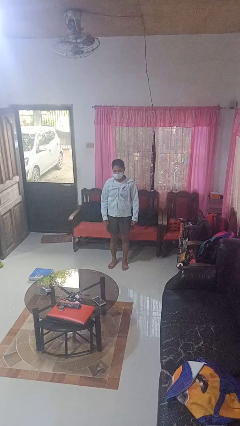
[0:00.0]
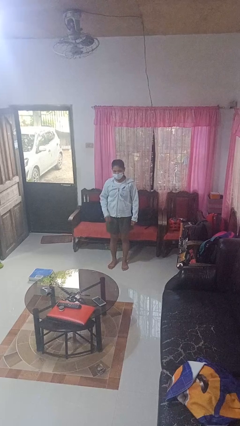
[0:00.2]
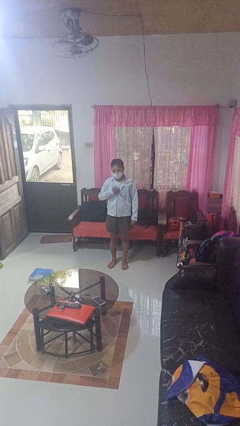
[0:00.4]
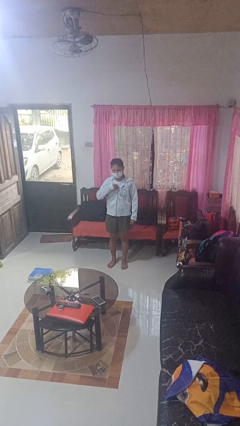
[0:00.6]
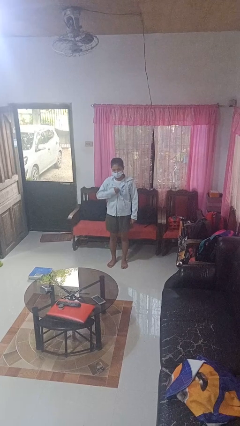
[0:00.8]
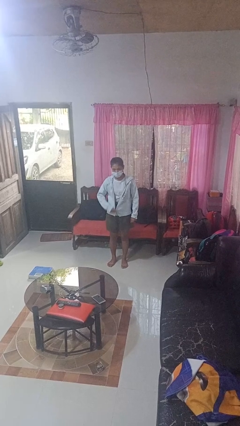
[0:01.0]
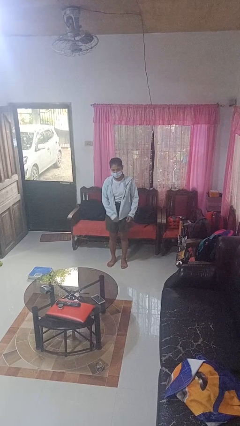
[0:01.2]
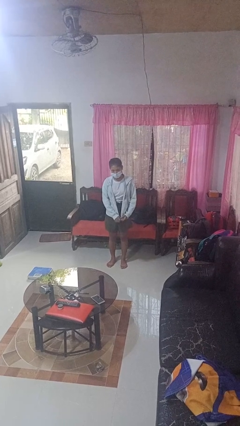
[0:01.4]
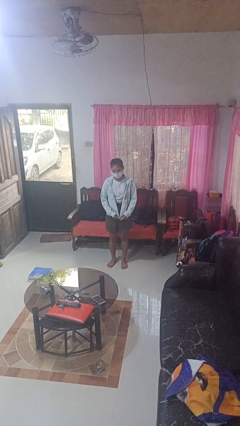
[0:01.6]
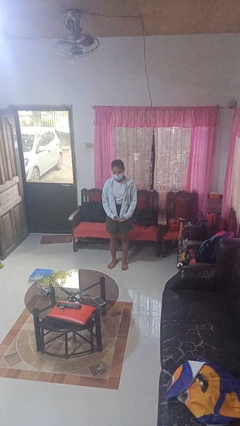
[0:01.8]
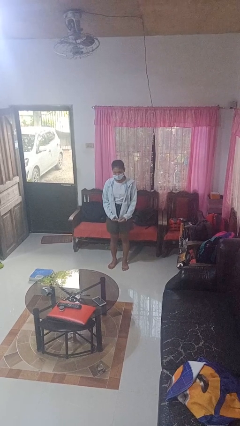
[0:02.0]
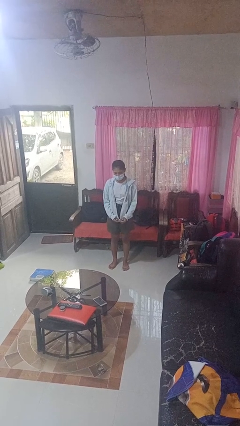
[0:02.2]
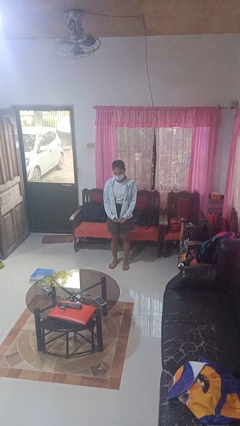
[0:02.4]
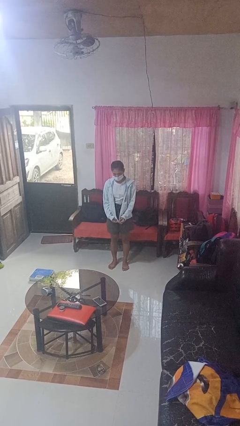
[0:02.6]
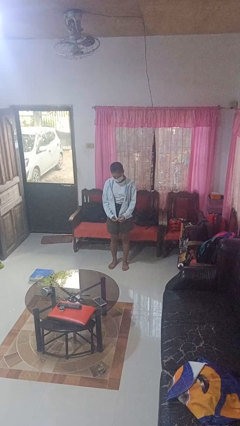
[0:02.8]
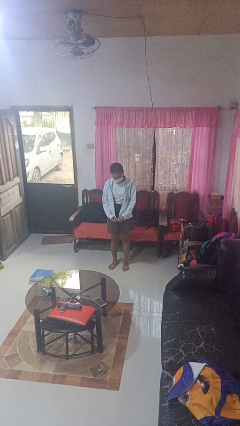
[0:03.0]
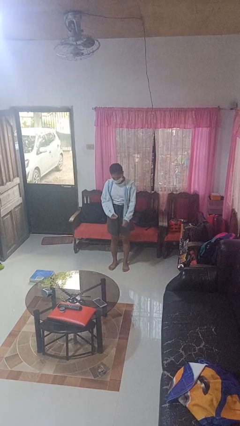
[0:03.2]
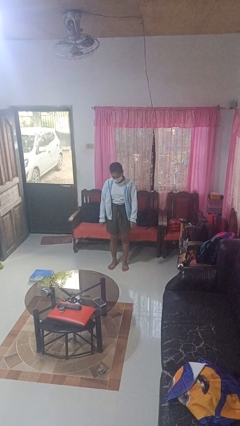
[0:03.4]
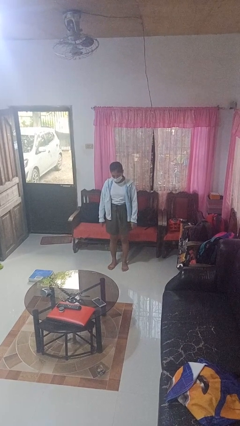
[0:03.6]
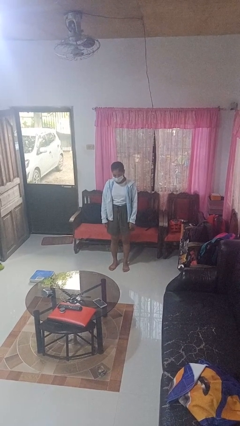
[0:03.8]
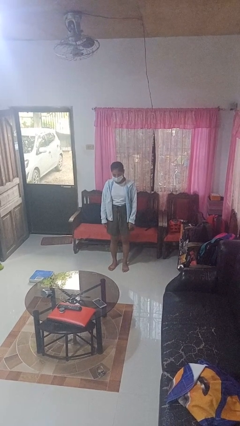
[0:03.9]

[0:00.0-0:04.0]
person unzips jacket

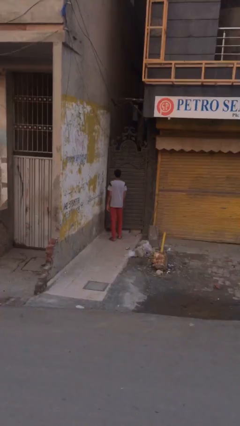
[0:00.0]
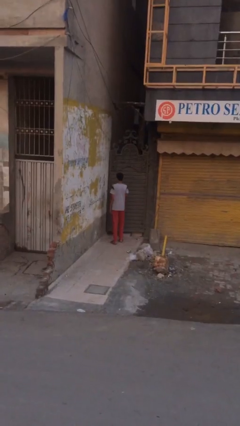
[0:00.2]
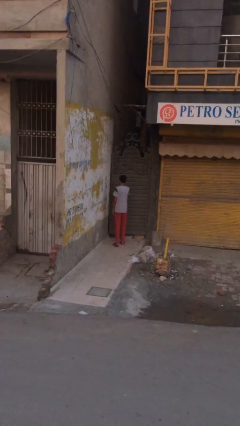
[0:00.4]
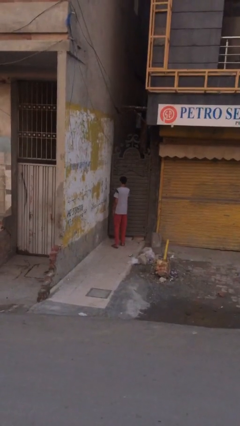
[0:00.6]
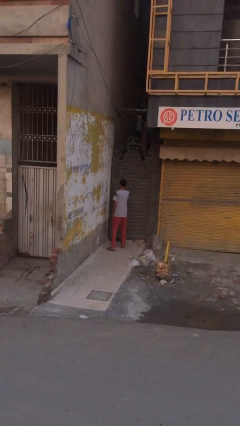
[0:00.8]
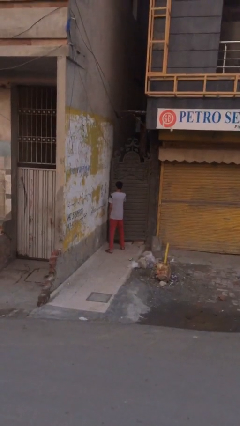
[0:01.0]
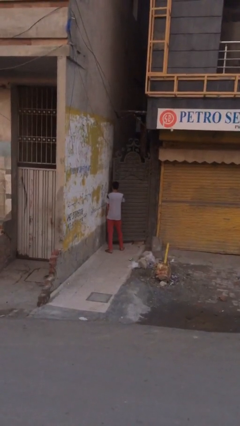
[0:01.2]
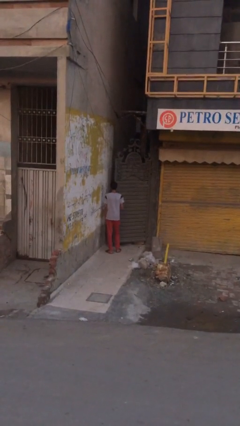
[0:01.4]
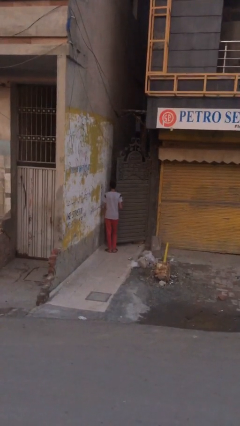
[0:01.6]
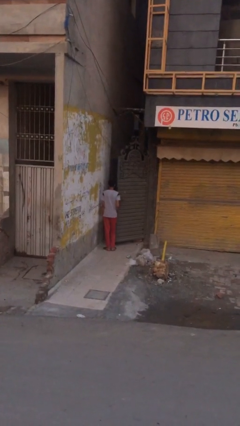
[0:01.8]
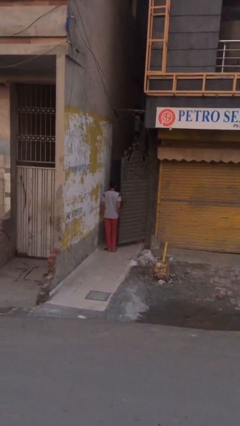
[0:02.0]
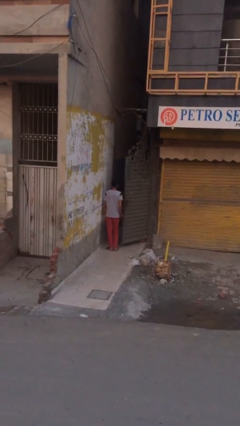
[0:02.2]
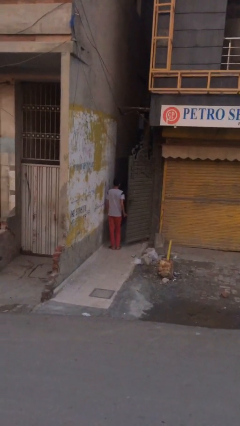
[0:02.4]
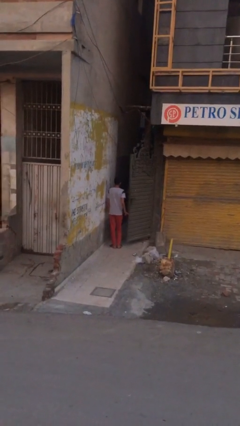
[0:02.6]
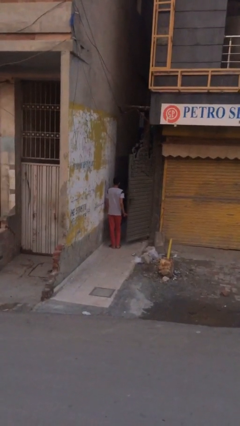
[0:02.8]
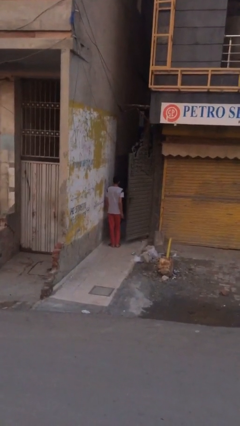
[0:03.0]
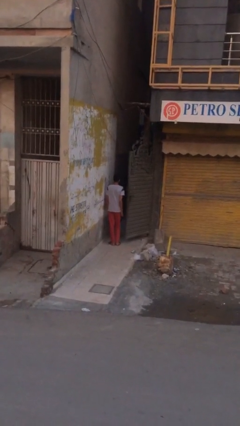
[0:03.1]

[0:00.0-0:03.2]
person opens facility door

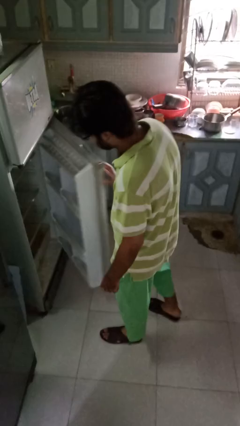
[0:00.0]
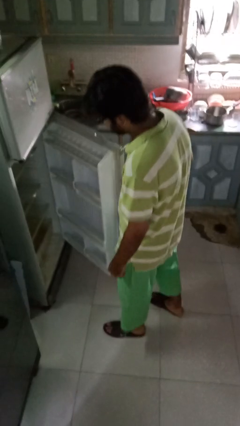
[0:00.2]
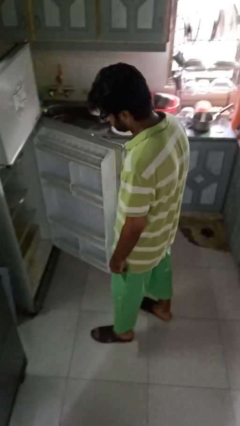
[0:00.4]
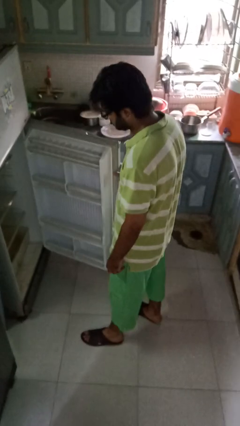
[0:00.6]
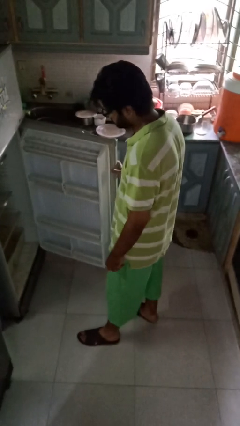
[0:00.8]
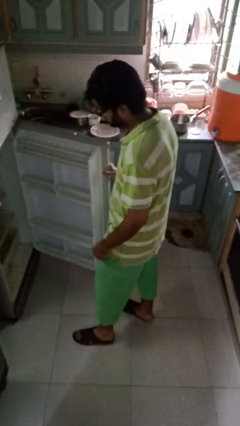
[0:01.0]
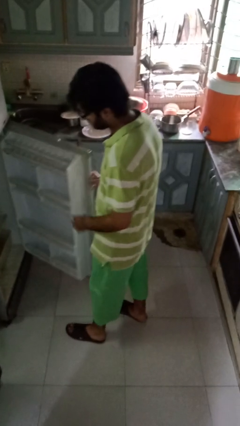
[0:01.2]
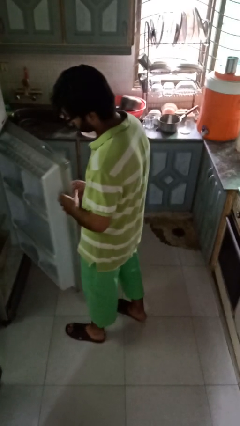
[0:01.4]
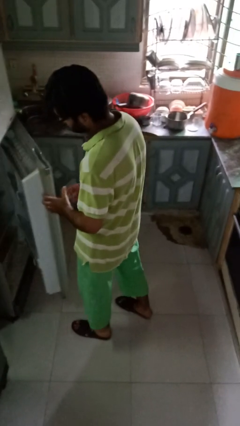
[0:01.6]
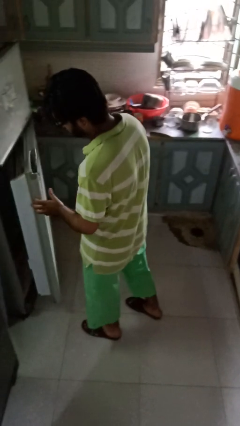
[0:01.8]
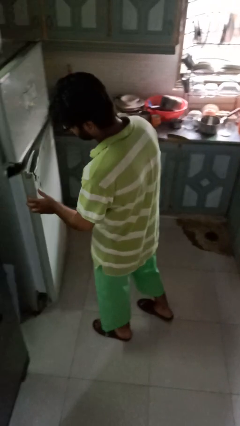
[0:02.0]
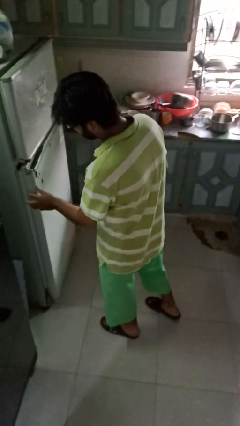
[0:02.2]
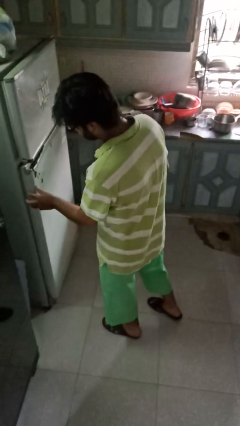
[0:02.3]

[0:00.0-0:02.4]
person closes refrigerator

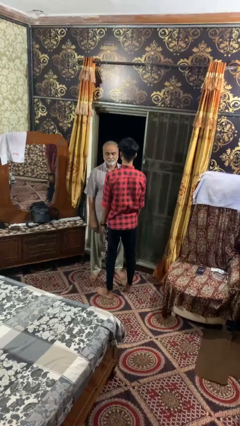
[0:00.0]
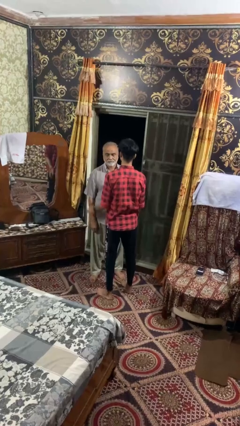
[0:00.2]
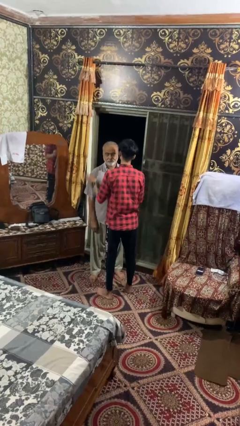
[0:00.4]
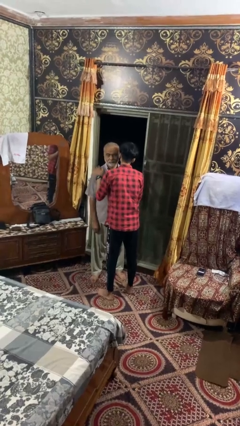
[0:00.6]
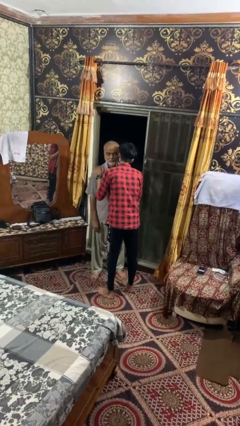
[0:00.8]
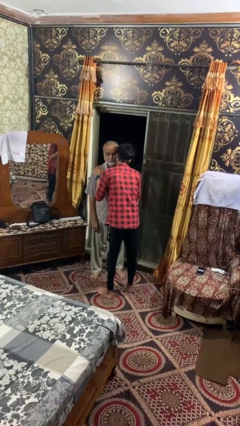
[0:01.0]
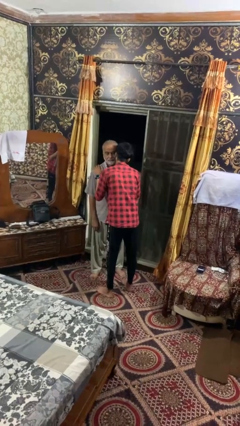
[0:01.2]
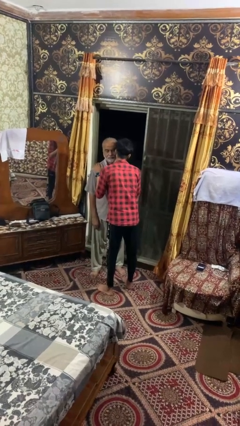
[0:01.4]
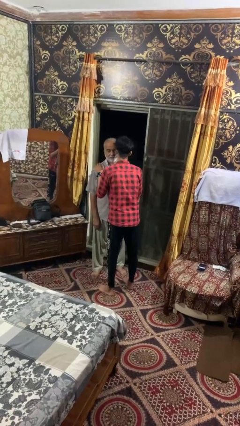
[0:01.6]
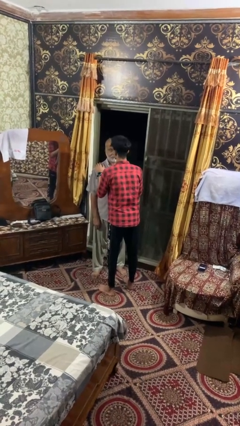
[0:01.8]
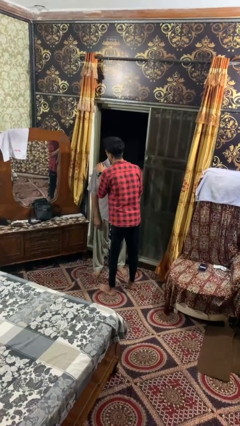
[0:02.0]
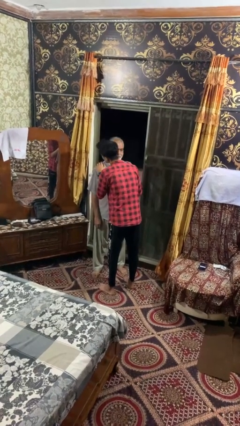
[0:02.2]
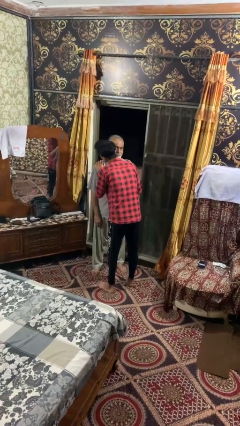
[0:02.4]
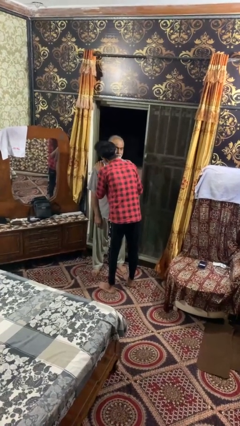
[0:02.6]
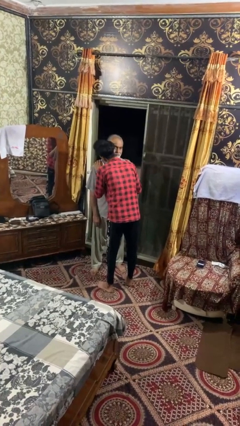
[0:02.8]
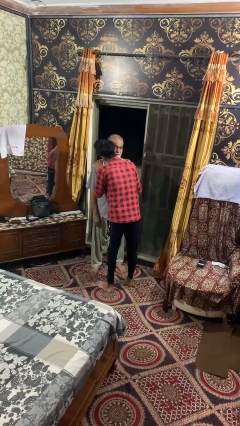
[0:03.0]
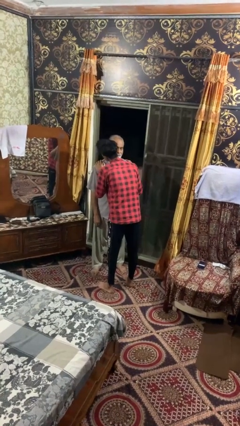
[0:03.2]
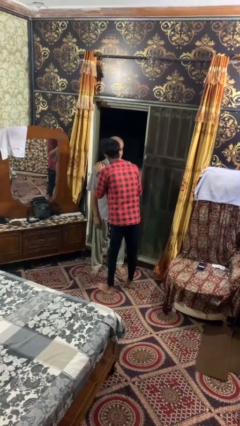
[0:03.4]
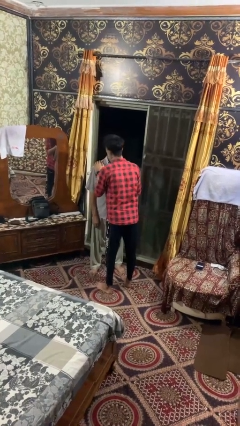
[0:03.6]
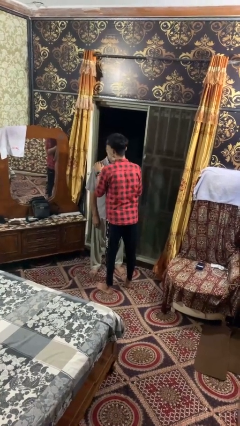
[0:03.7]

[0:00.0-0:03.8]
person kisses cheek of person

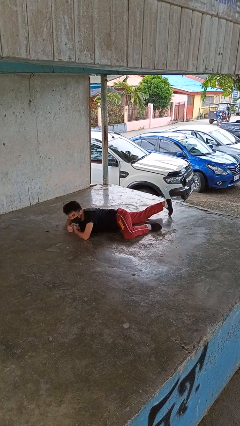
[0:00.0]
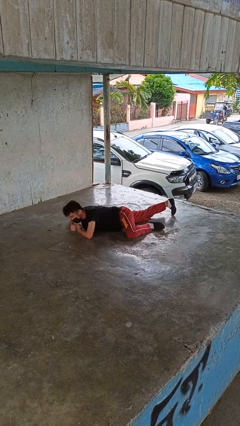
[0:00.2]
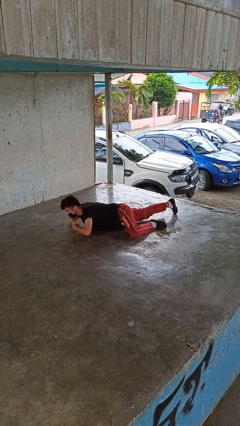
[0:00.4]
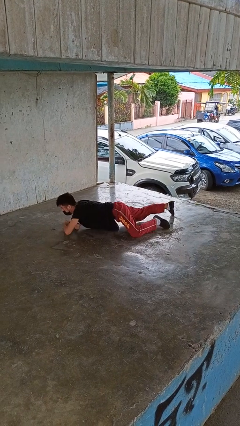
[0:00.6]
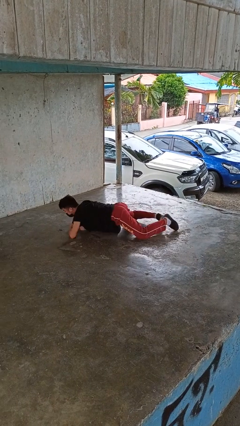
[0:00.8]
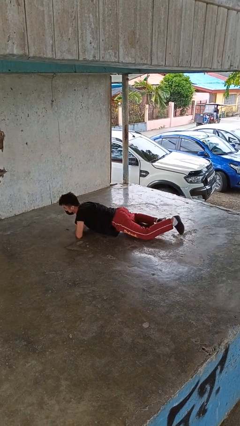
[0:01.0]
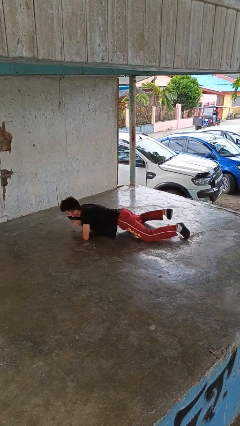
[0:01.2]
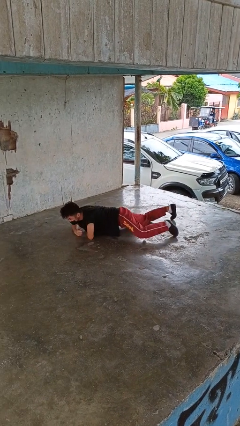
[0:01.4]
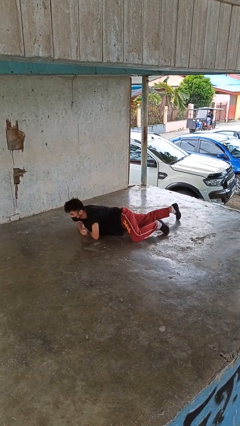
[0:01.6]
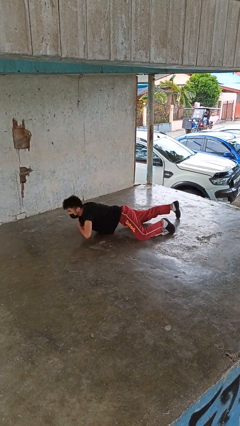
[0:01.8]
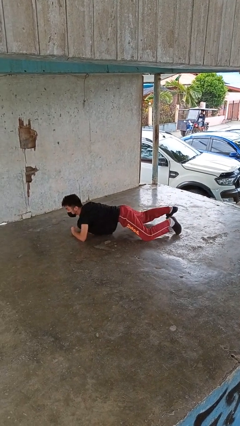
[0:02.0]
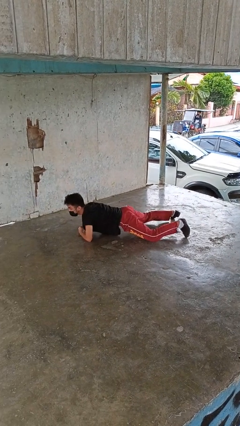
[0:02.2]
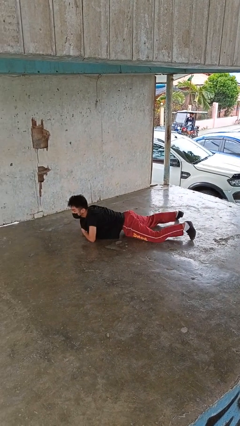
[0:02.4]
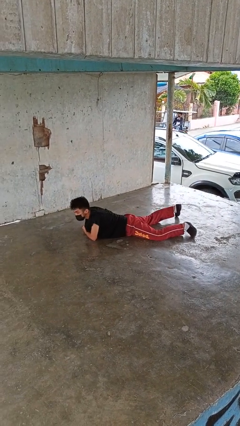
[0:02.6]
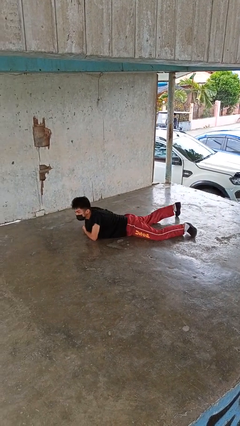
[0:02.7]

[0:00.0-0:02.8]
person crawls

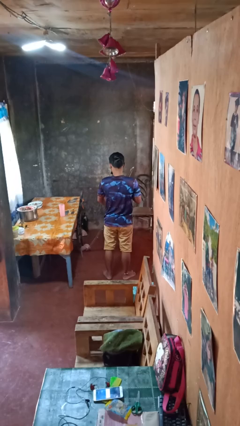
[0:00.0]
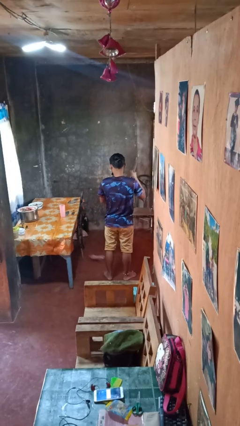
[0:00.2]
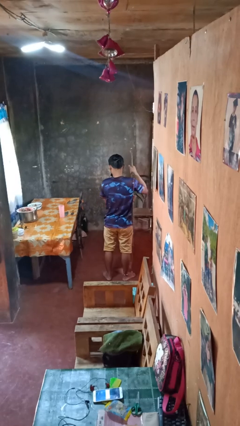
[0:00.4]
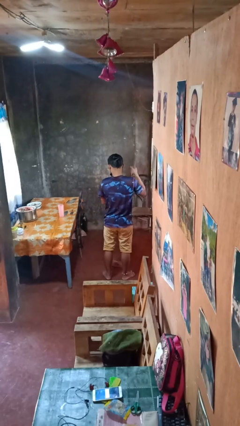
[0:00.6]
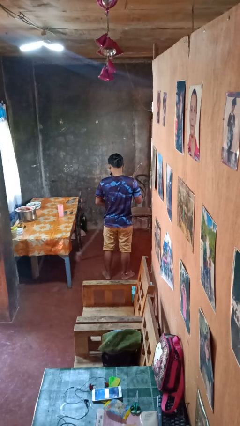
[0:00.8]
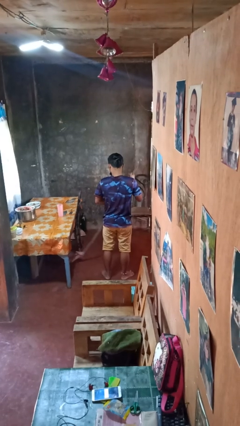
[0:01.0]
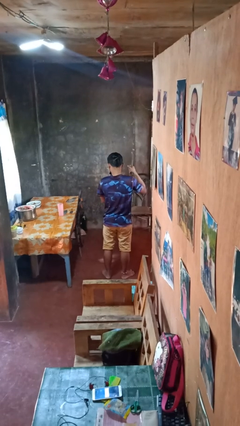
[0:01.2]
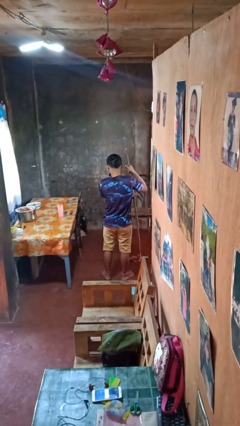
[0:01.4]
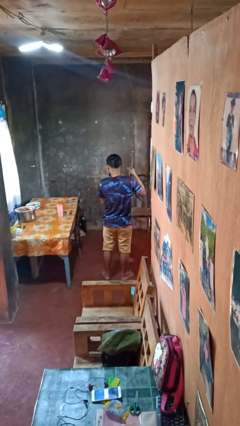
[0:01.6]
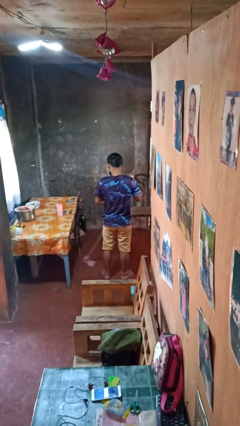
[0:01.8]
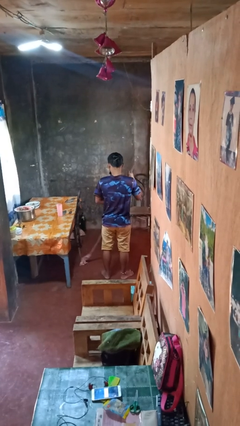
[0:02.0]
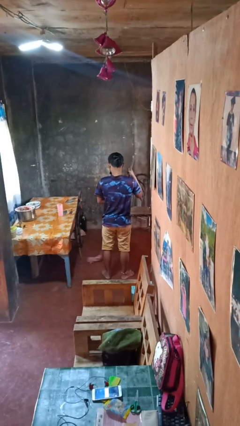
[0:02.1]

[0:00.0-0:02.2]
person mops
